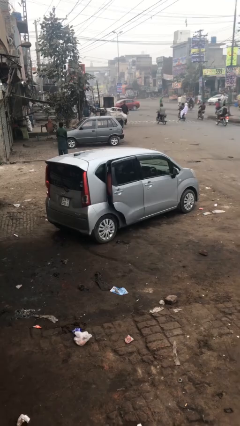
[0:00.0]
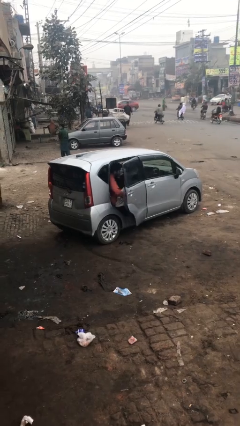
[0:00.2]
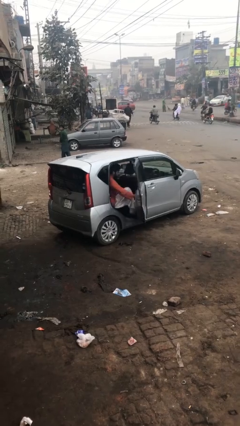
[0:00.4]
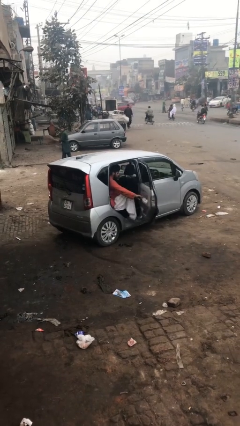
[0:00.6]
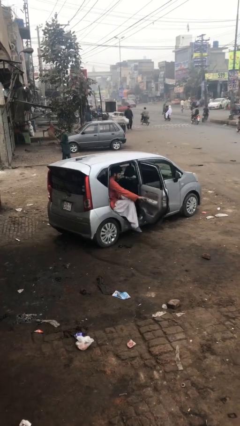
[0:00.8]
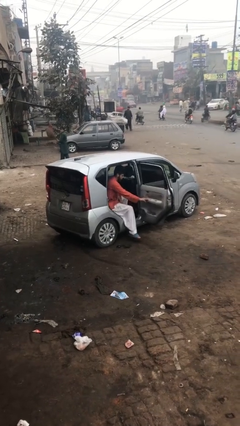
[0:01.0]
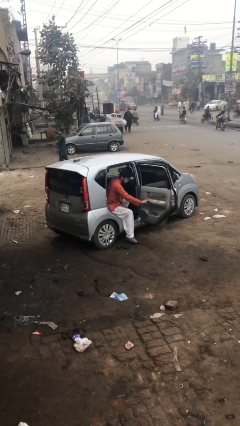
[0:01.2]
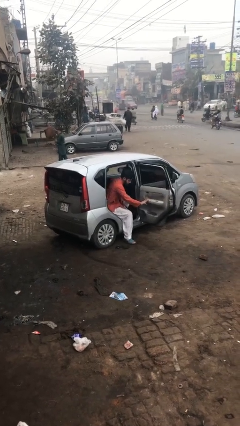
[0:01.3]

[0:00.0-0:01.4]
person opens car door

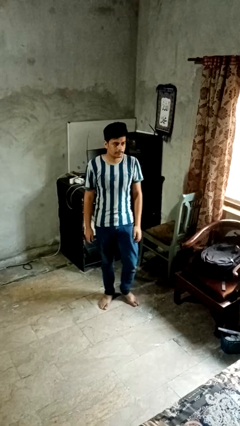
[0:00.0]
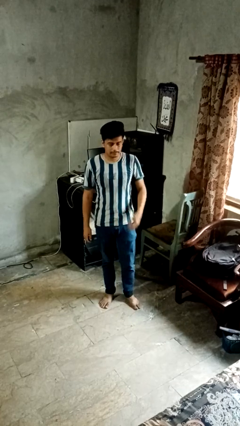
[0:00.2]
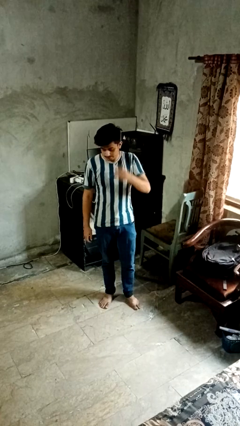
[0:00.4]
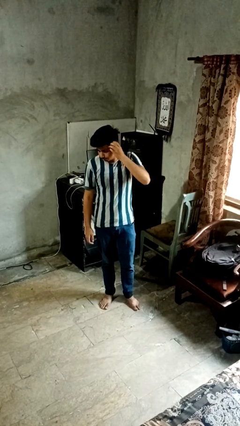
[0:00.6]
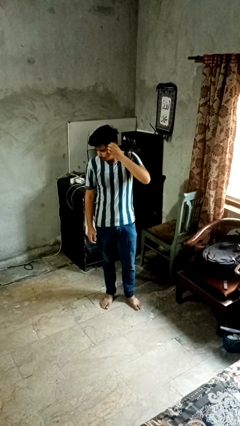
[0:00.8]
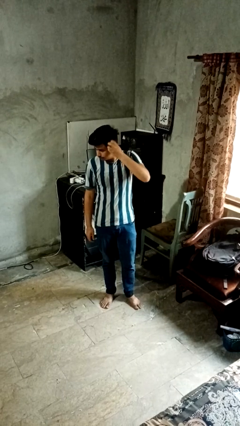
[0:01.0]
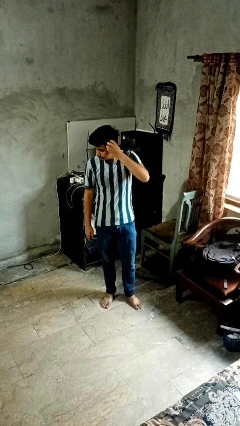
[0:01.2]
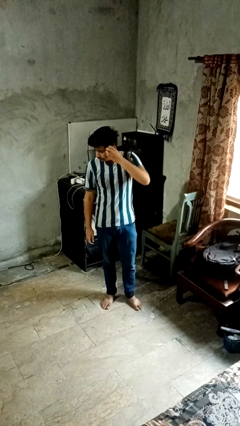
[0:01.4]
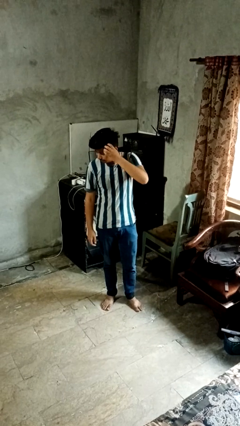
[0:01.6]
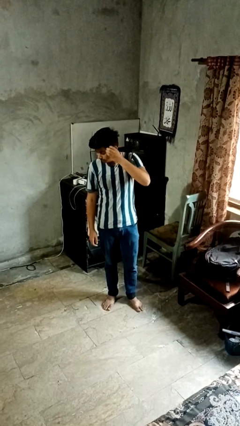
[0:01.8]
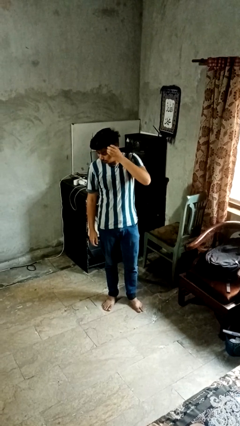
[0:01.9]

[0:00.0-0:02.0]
person scratches face

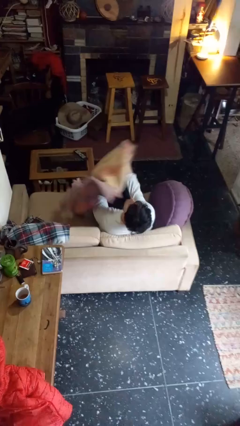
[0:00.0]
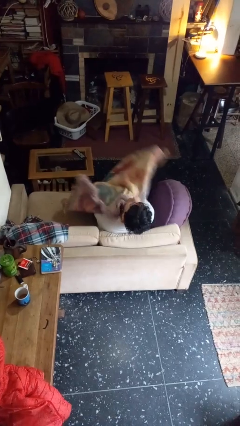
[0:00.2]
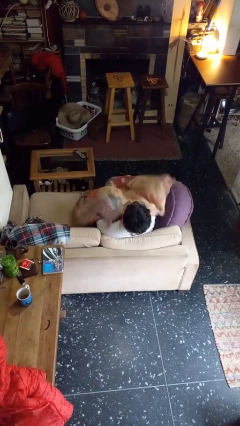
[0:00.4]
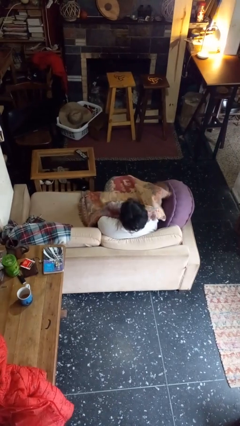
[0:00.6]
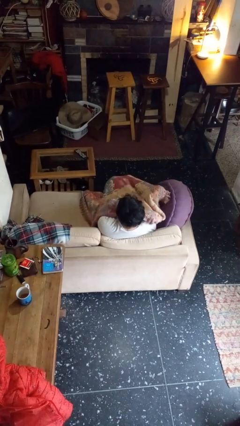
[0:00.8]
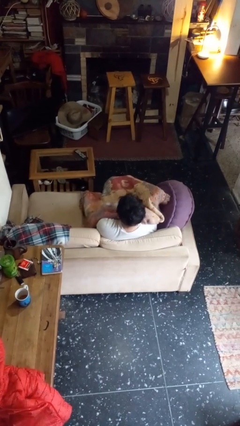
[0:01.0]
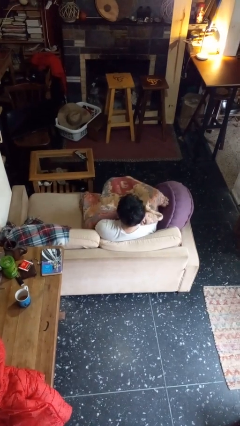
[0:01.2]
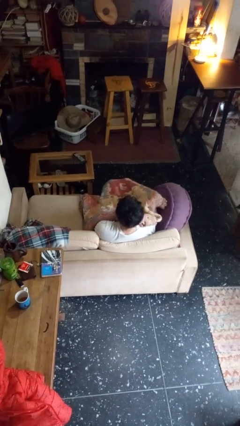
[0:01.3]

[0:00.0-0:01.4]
person covers with blanket

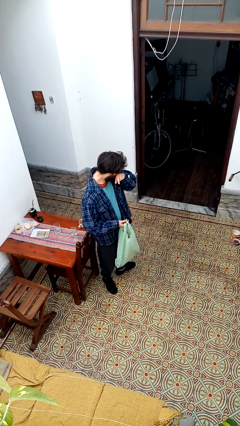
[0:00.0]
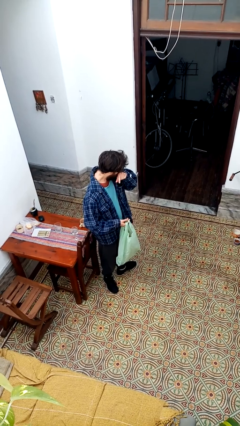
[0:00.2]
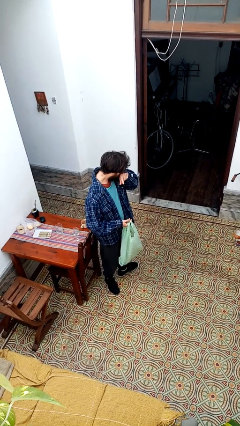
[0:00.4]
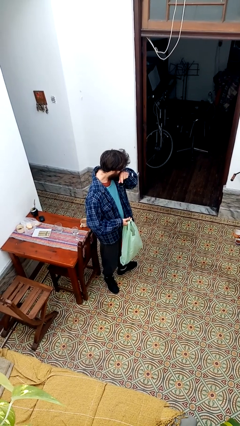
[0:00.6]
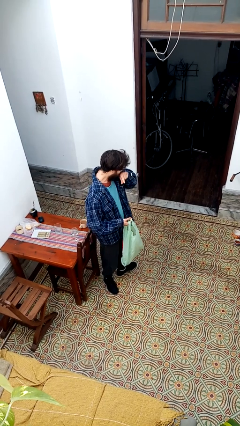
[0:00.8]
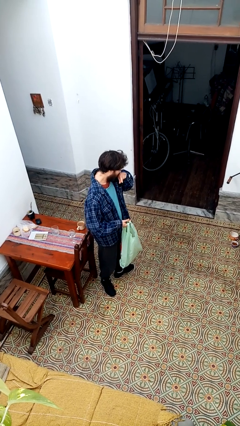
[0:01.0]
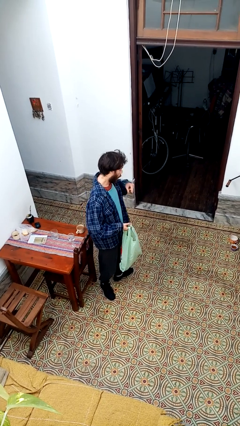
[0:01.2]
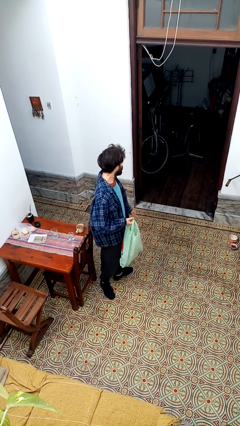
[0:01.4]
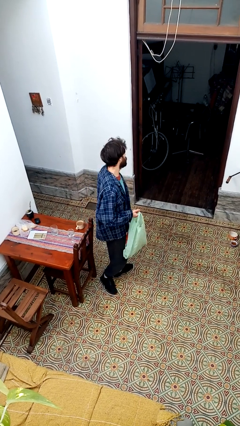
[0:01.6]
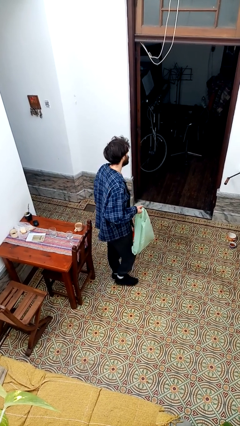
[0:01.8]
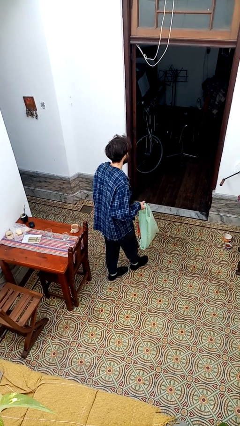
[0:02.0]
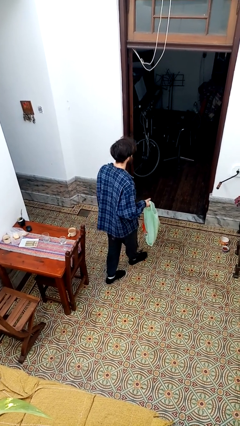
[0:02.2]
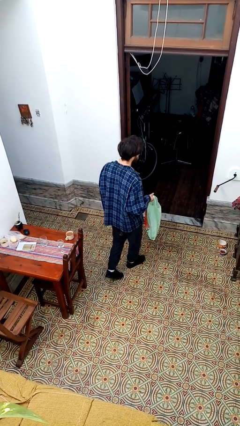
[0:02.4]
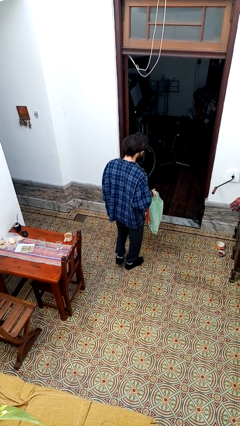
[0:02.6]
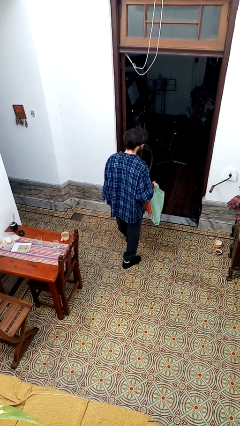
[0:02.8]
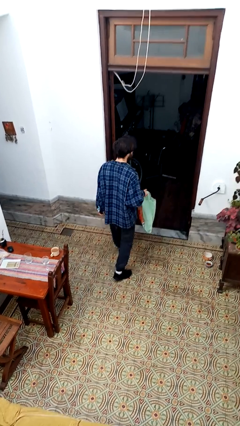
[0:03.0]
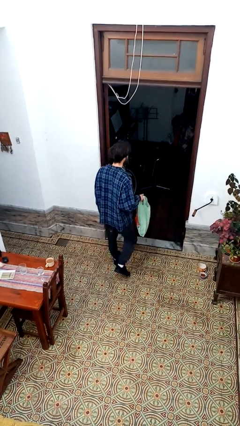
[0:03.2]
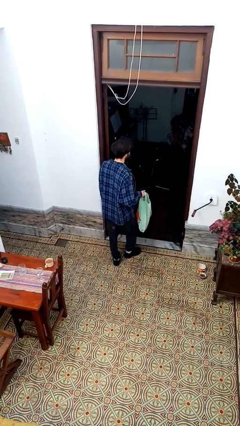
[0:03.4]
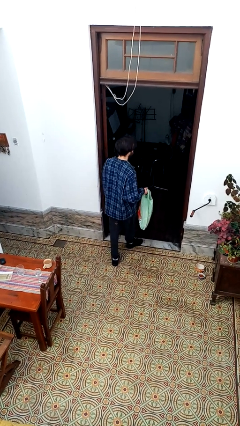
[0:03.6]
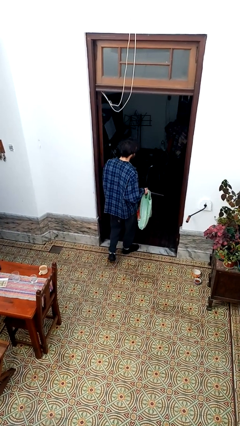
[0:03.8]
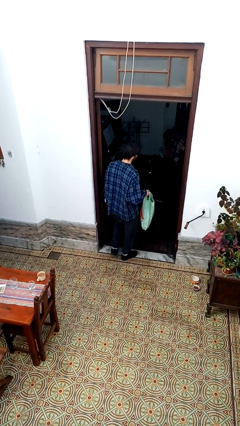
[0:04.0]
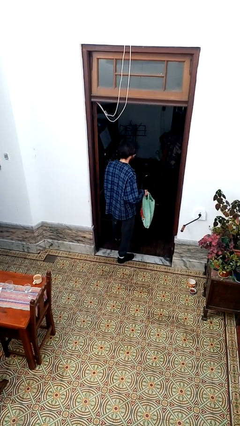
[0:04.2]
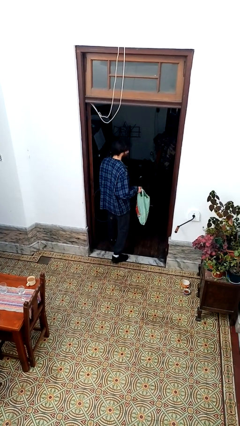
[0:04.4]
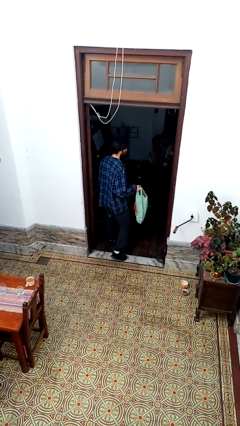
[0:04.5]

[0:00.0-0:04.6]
person carries groceries

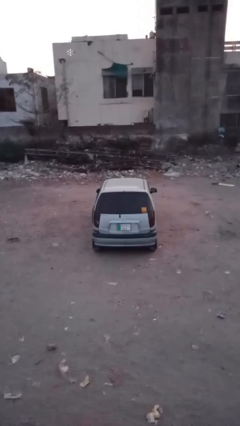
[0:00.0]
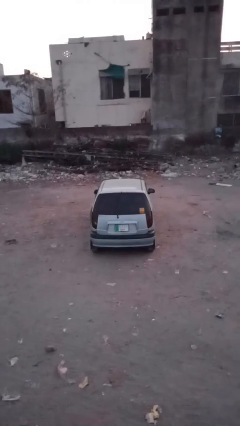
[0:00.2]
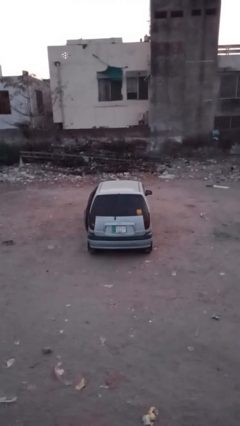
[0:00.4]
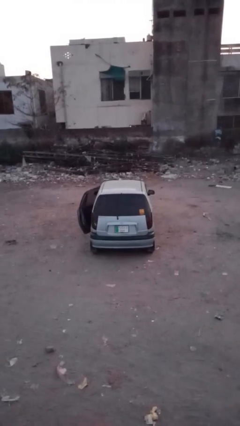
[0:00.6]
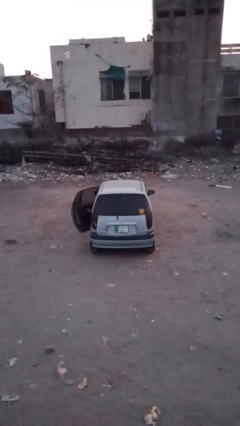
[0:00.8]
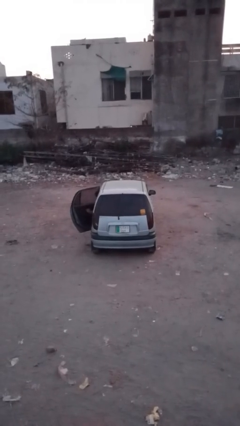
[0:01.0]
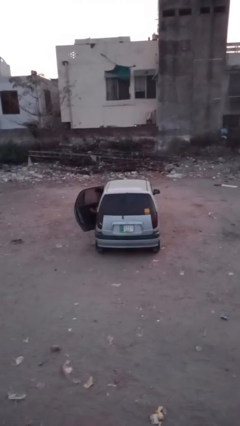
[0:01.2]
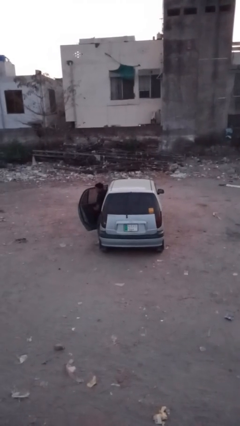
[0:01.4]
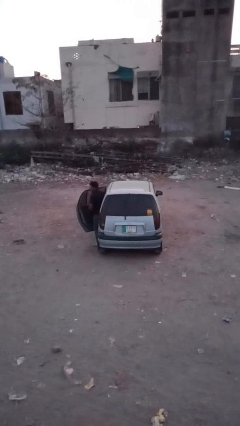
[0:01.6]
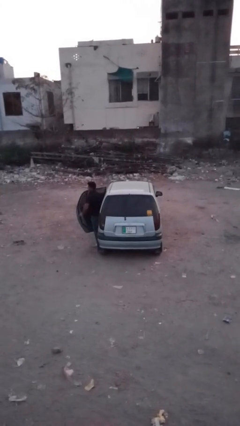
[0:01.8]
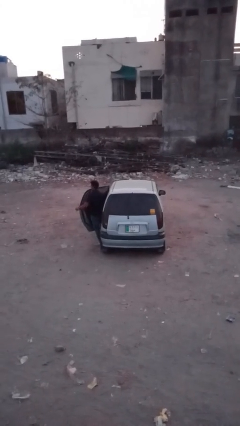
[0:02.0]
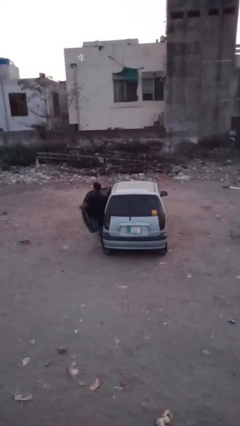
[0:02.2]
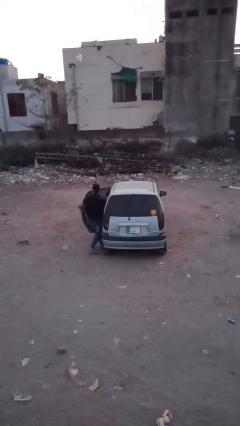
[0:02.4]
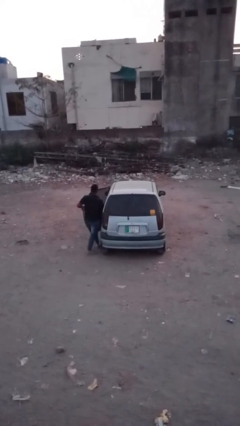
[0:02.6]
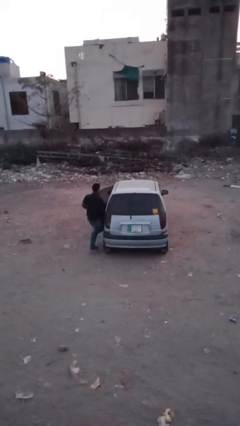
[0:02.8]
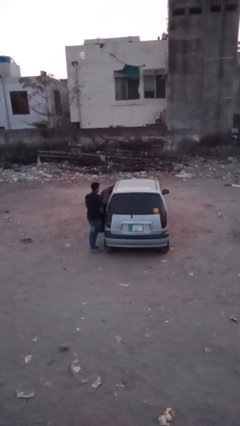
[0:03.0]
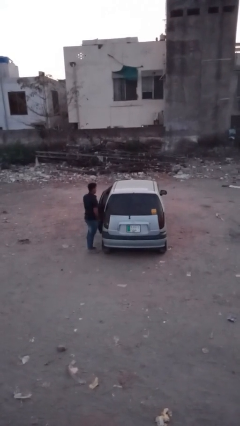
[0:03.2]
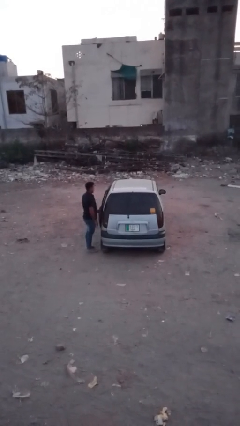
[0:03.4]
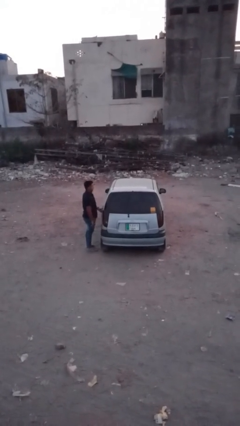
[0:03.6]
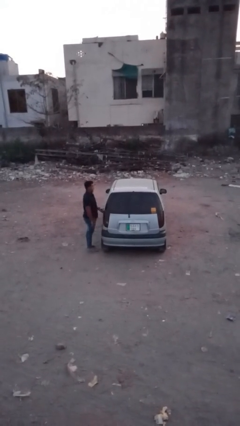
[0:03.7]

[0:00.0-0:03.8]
car drops off person

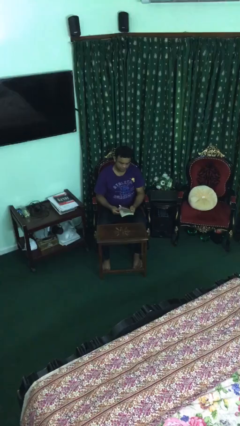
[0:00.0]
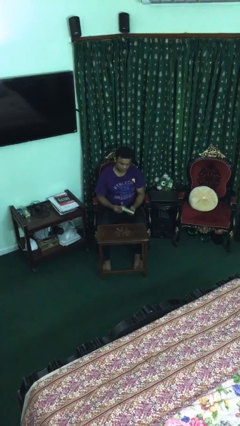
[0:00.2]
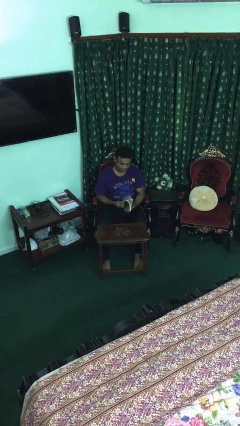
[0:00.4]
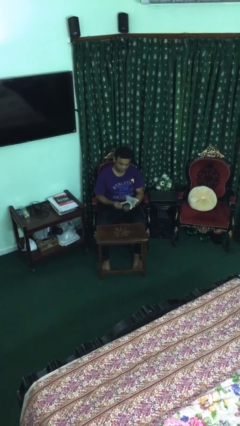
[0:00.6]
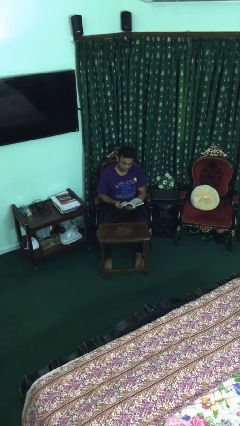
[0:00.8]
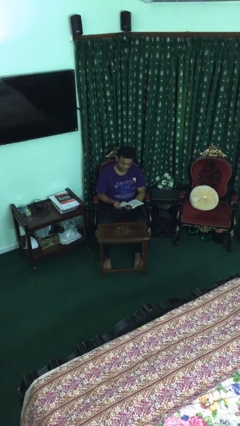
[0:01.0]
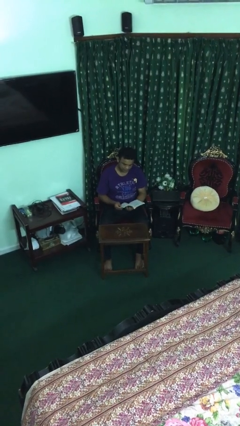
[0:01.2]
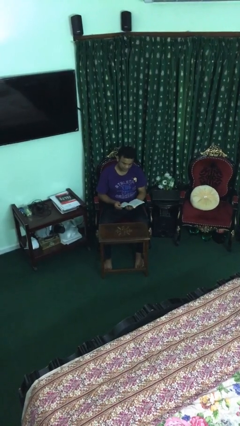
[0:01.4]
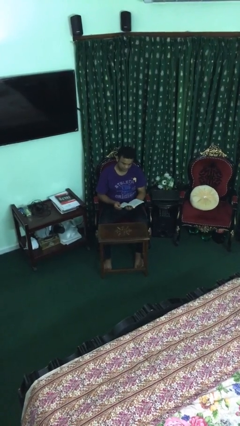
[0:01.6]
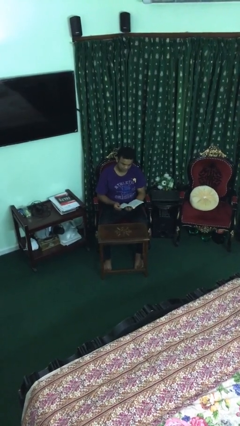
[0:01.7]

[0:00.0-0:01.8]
person reads document

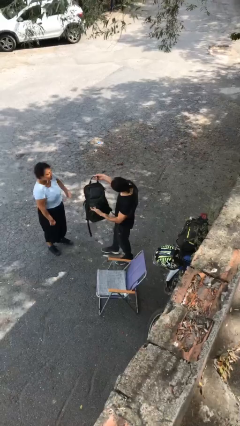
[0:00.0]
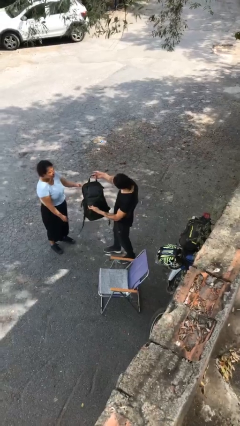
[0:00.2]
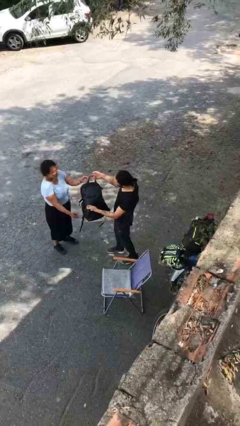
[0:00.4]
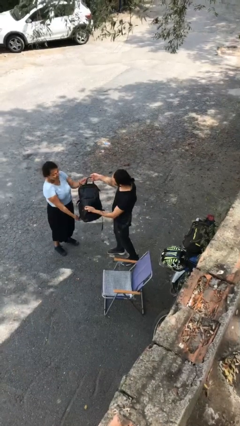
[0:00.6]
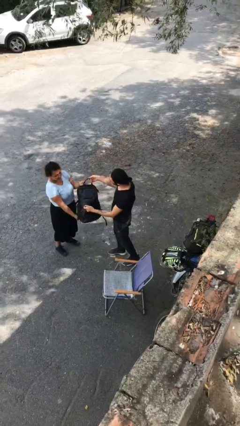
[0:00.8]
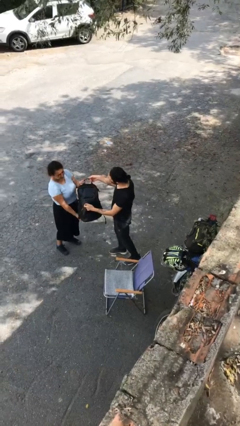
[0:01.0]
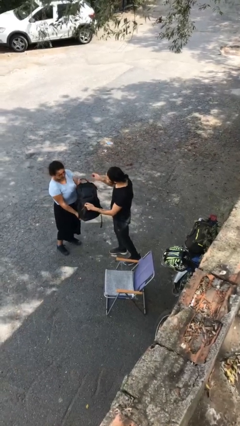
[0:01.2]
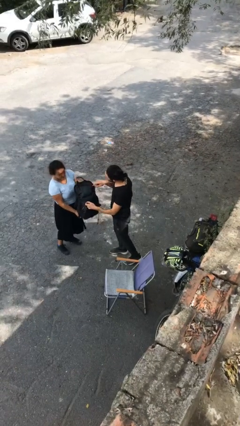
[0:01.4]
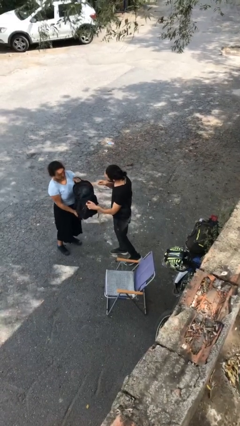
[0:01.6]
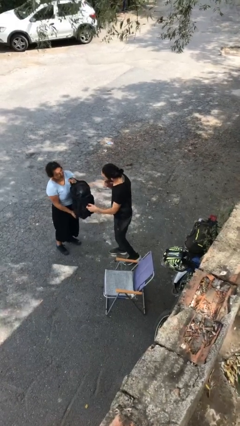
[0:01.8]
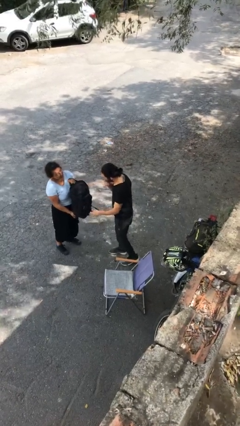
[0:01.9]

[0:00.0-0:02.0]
person transfers object to person

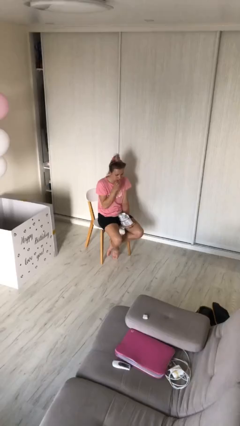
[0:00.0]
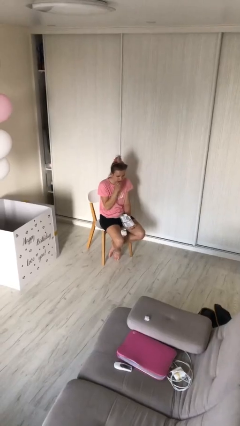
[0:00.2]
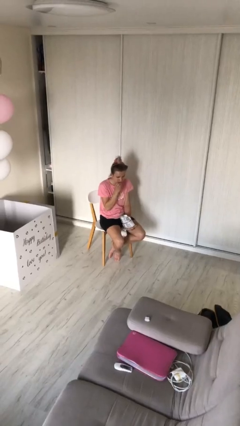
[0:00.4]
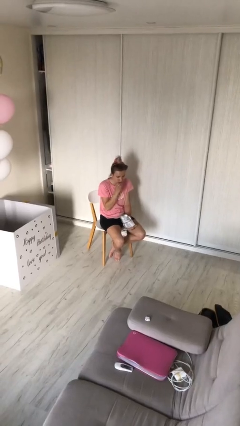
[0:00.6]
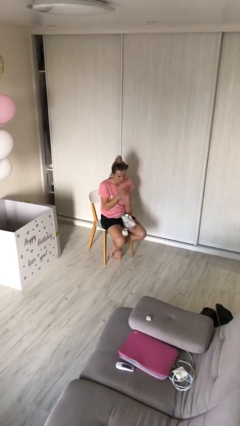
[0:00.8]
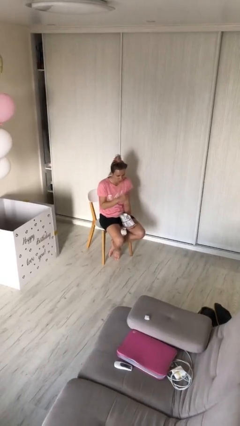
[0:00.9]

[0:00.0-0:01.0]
person eats snack from bag
